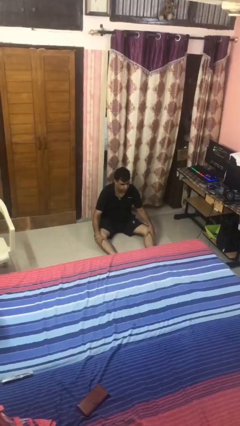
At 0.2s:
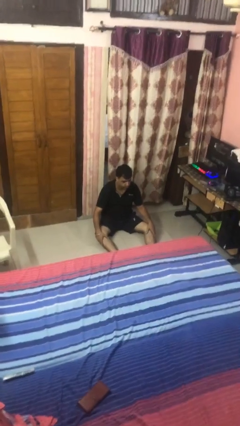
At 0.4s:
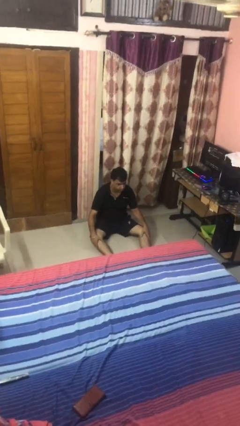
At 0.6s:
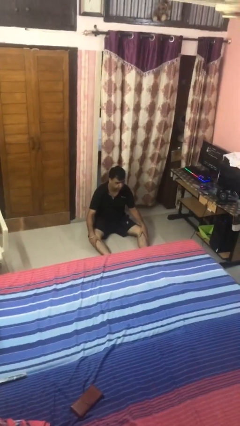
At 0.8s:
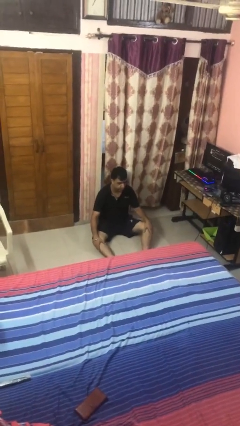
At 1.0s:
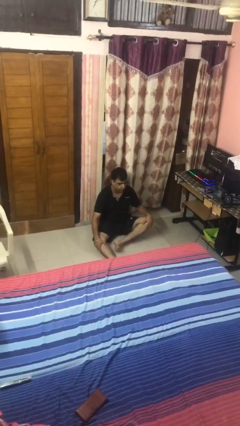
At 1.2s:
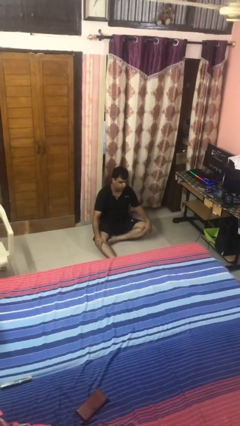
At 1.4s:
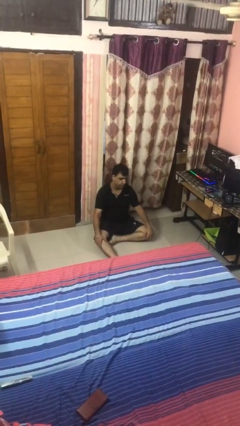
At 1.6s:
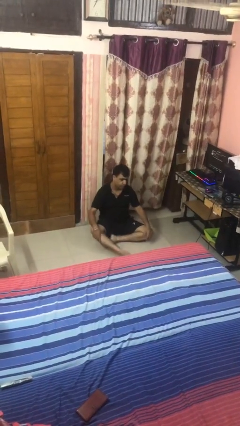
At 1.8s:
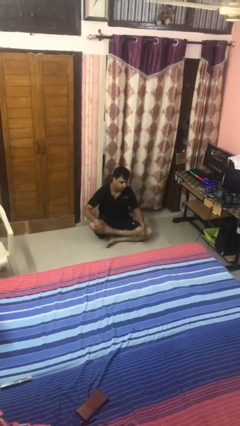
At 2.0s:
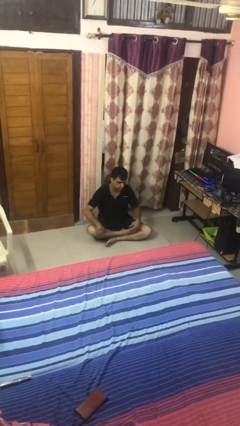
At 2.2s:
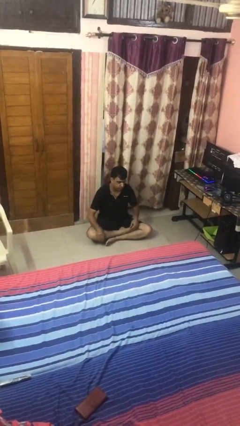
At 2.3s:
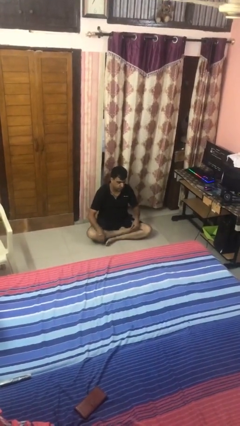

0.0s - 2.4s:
person crosses legs

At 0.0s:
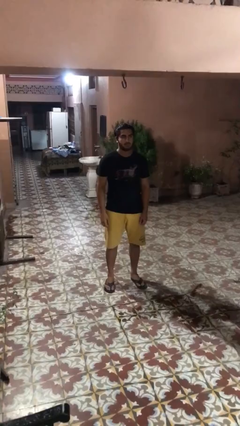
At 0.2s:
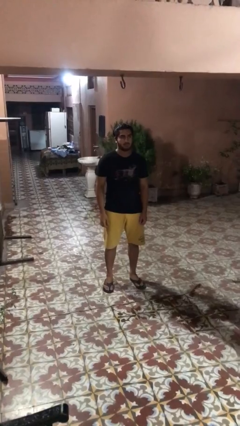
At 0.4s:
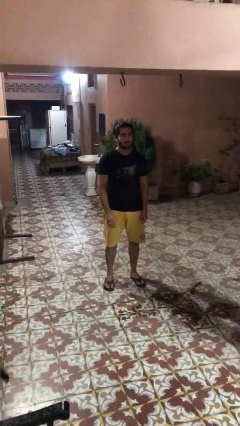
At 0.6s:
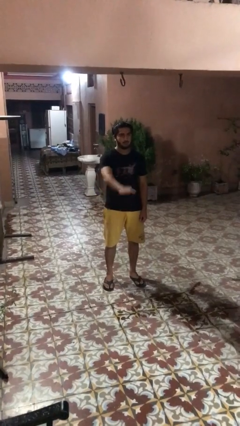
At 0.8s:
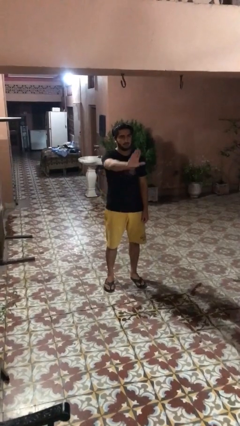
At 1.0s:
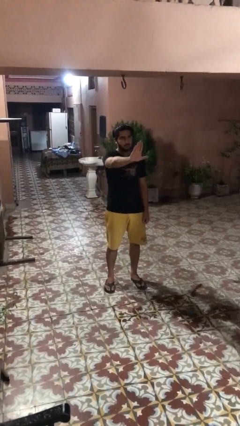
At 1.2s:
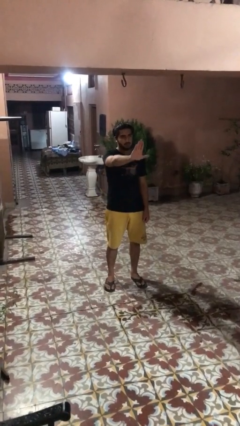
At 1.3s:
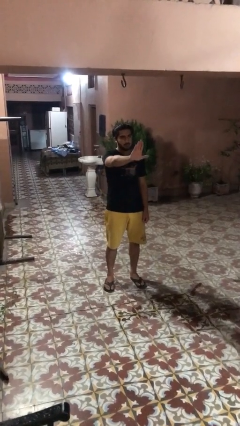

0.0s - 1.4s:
person gestures stop

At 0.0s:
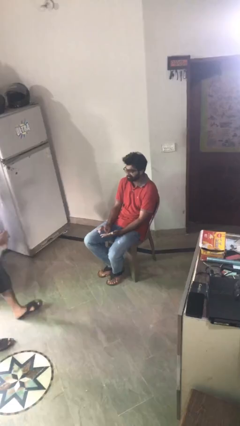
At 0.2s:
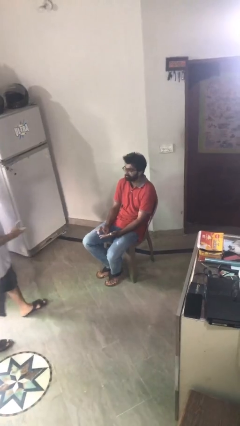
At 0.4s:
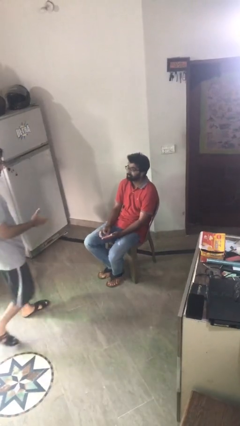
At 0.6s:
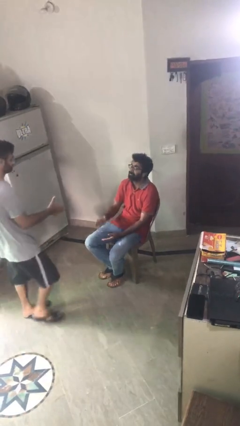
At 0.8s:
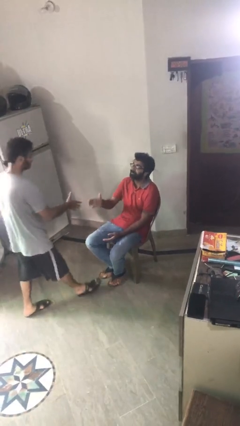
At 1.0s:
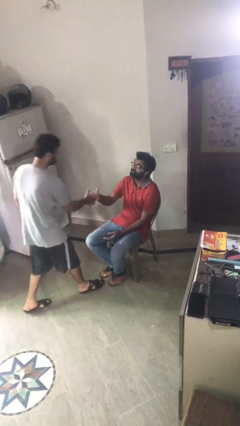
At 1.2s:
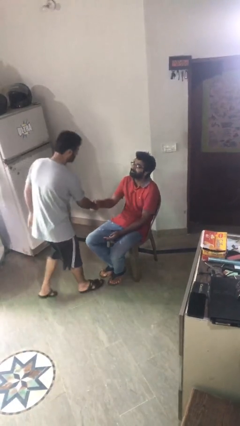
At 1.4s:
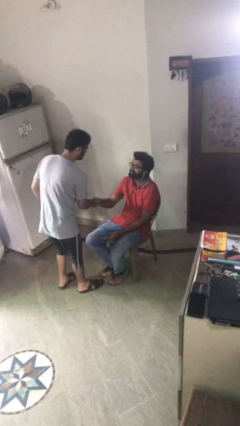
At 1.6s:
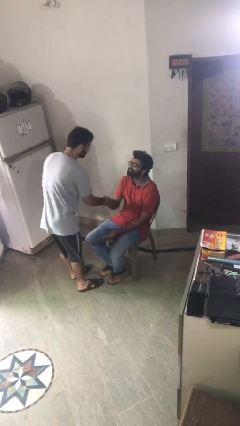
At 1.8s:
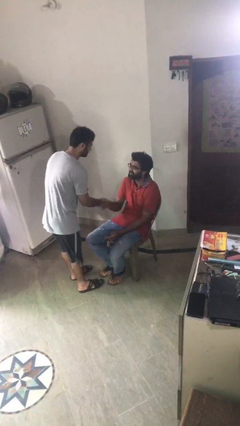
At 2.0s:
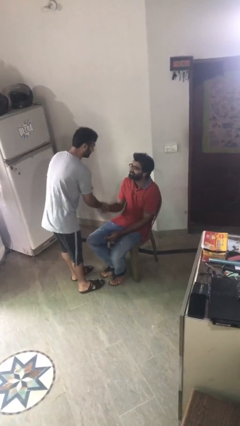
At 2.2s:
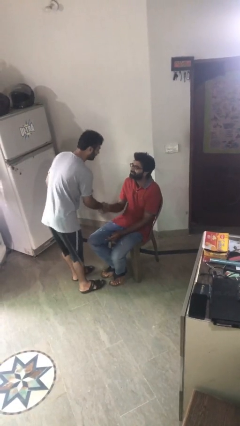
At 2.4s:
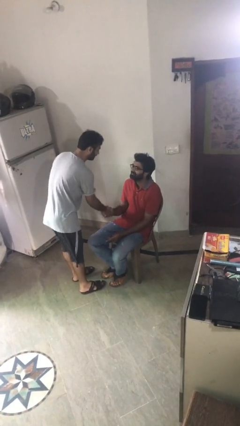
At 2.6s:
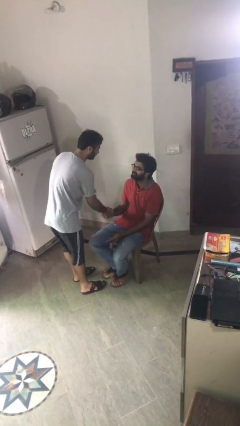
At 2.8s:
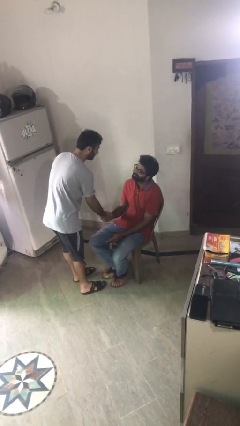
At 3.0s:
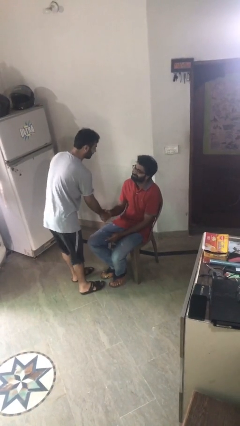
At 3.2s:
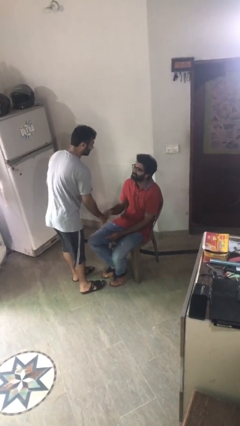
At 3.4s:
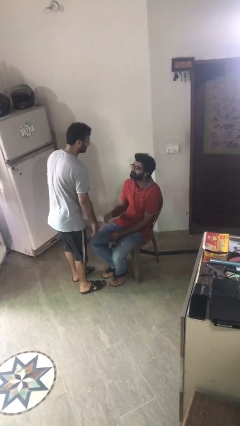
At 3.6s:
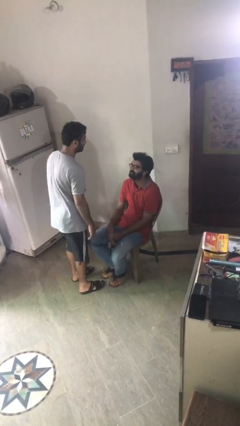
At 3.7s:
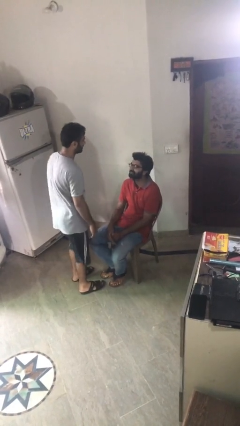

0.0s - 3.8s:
person shakes hand

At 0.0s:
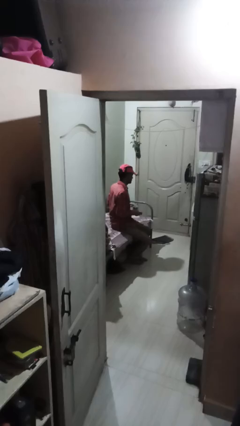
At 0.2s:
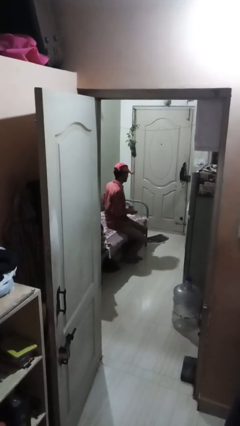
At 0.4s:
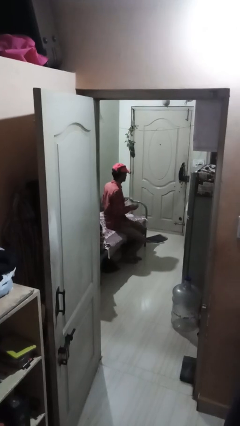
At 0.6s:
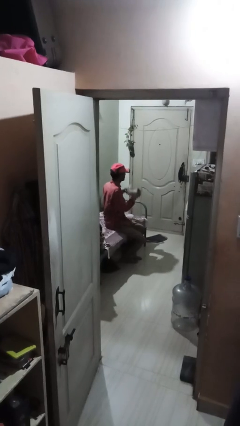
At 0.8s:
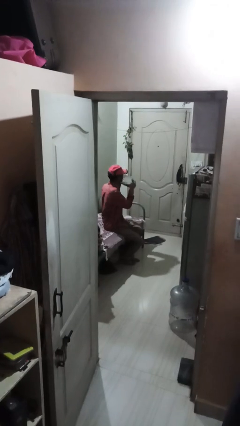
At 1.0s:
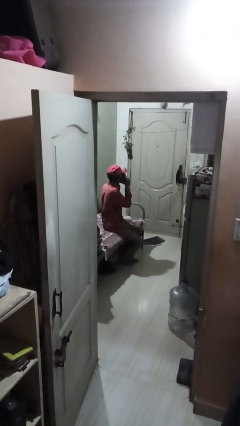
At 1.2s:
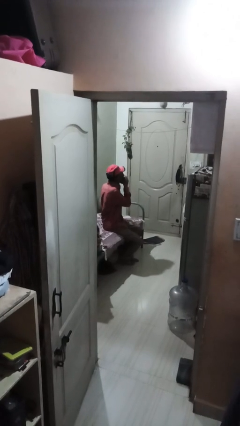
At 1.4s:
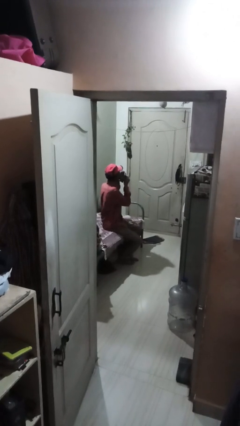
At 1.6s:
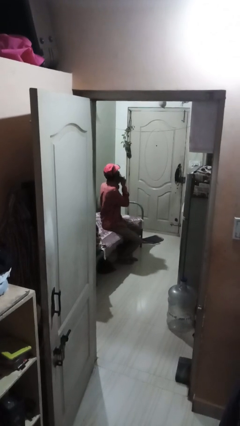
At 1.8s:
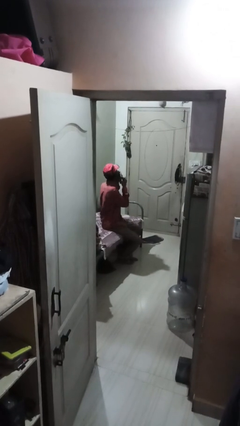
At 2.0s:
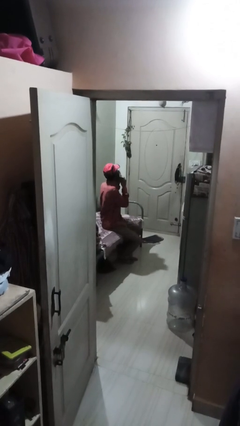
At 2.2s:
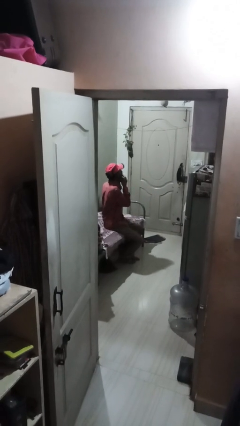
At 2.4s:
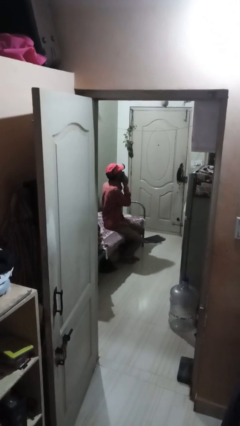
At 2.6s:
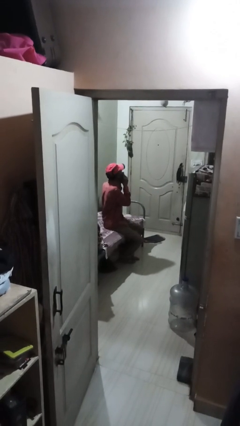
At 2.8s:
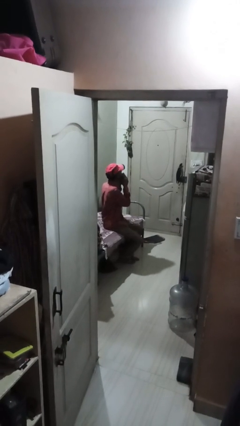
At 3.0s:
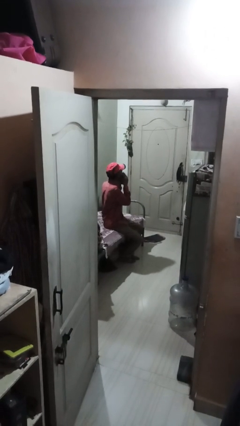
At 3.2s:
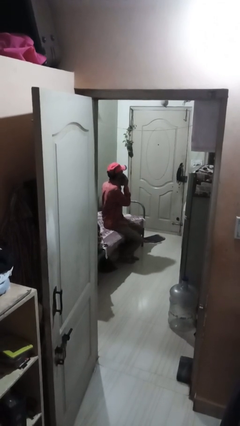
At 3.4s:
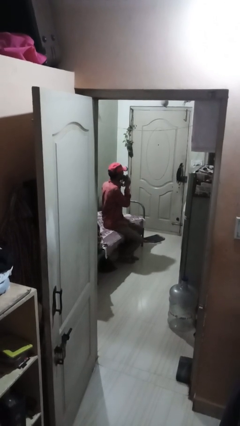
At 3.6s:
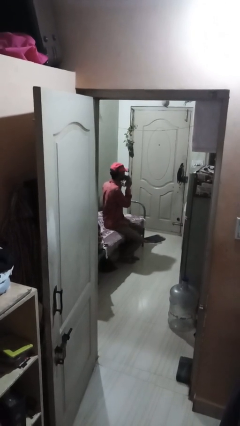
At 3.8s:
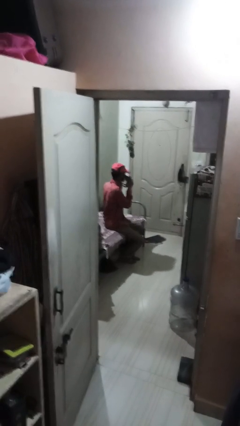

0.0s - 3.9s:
person wipes mouth with napkin

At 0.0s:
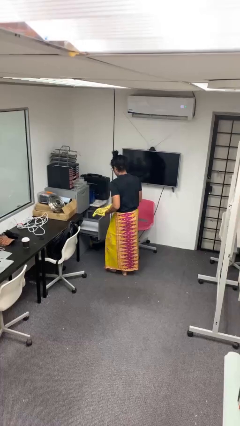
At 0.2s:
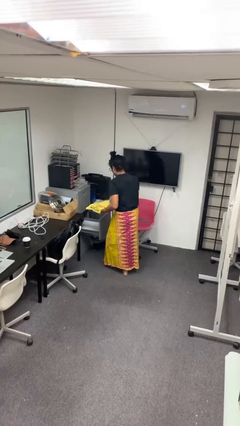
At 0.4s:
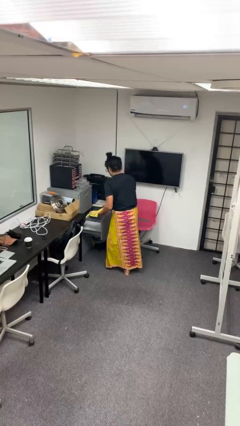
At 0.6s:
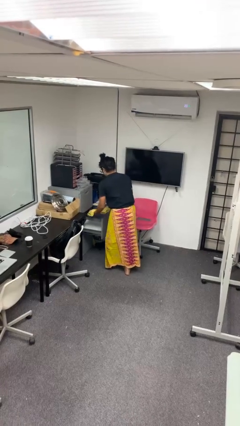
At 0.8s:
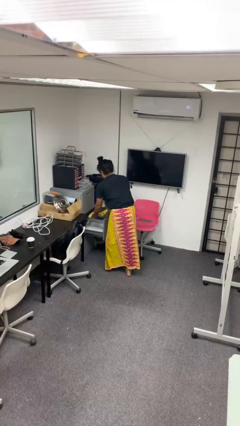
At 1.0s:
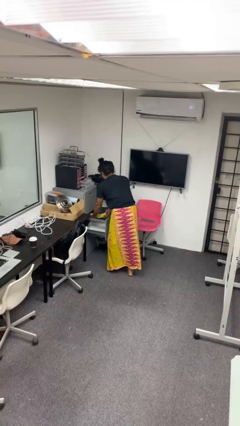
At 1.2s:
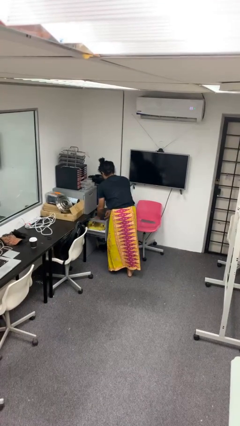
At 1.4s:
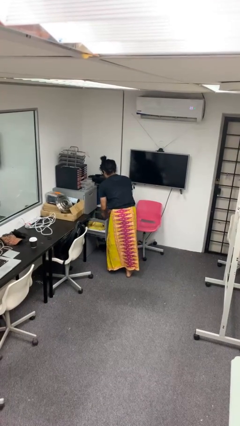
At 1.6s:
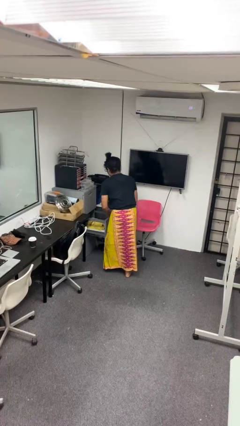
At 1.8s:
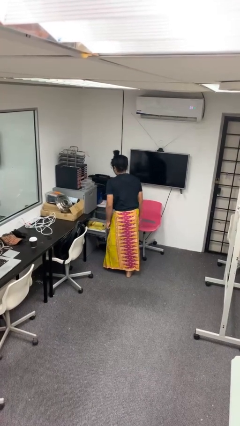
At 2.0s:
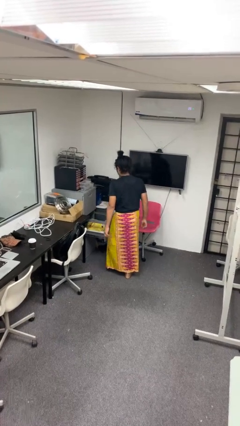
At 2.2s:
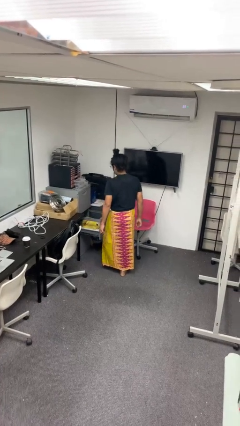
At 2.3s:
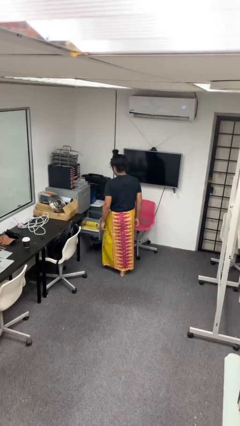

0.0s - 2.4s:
person puts clothes into dresser

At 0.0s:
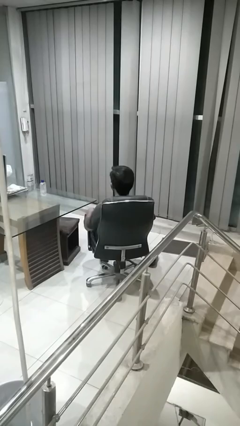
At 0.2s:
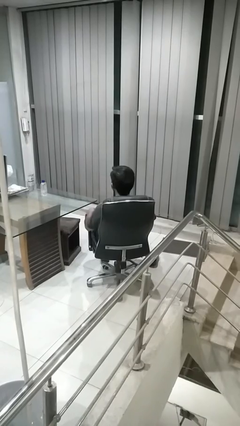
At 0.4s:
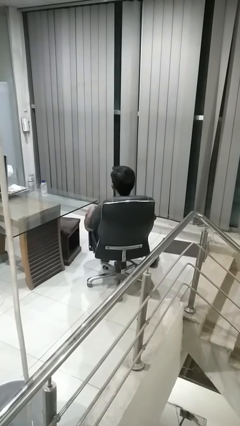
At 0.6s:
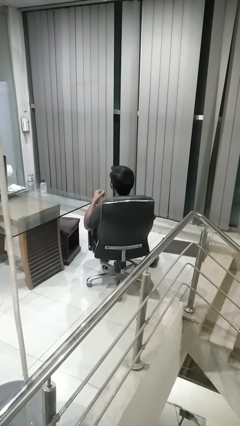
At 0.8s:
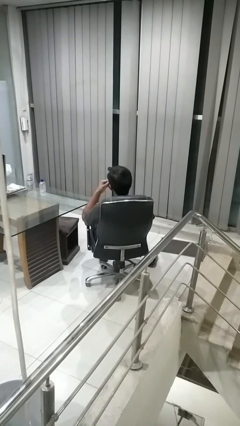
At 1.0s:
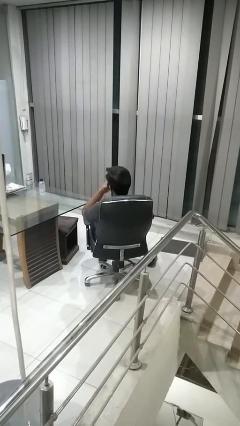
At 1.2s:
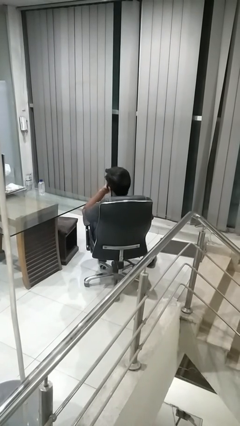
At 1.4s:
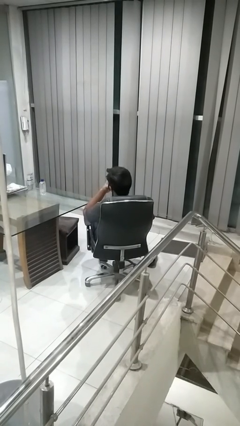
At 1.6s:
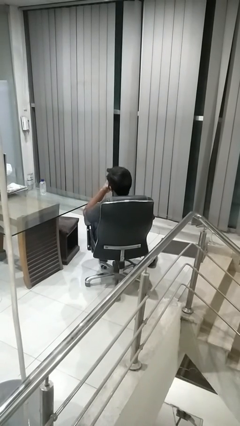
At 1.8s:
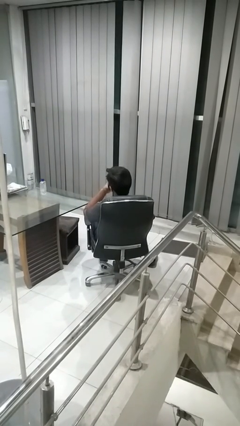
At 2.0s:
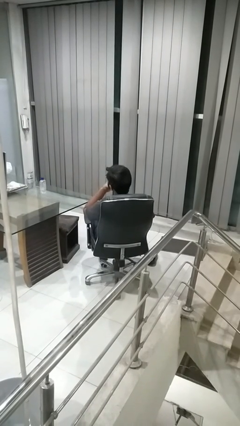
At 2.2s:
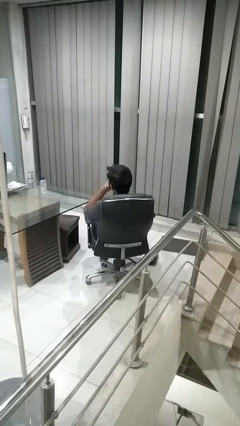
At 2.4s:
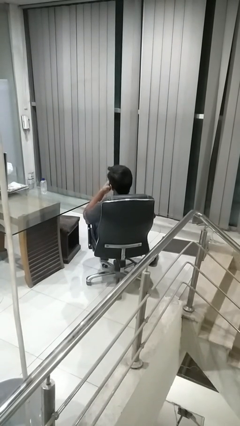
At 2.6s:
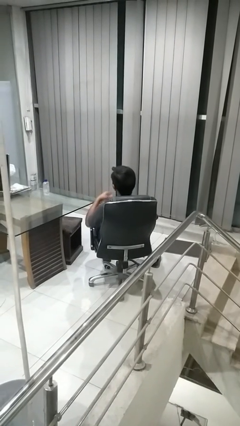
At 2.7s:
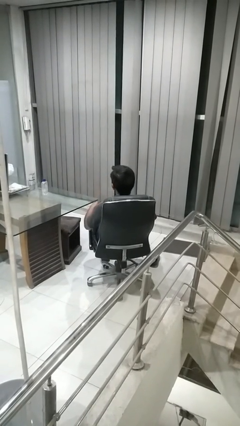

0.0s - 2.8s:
person strokes chin

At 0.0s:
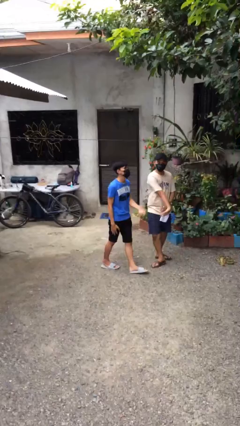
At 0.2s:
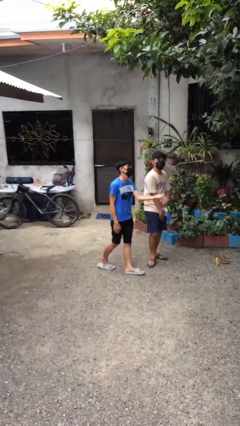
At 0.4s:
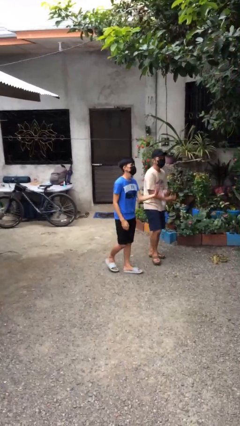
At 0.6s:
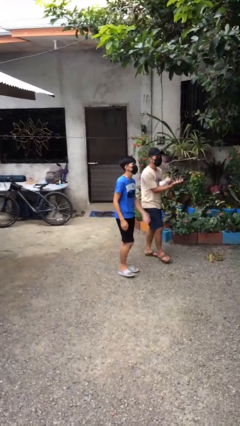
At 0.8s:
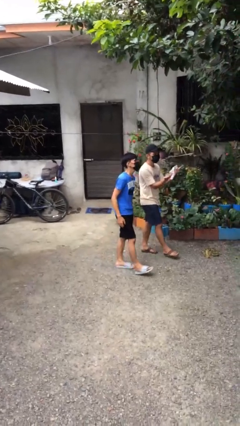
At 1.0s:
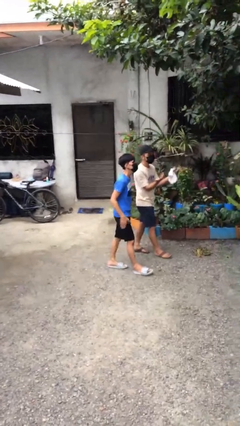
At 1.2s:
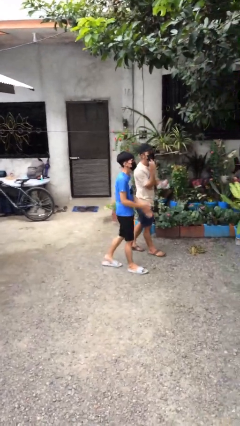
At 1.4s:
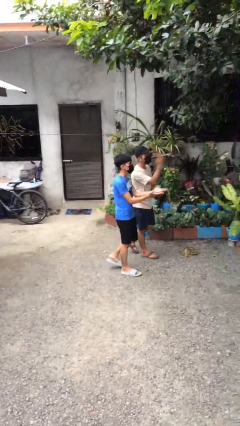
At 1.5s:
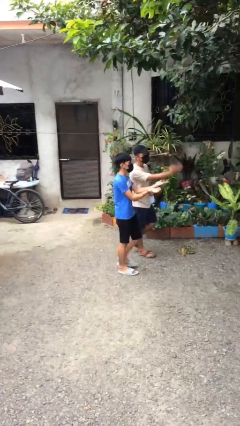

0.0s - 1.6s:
person talks to person
